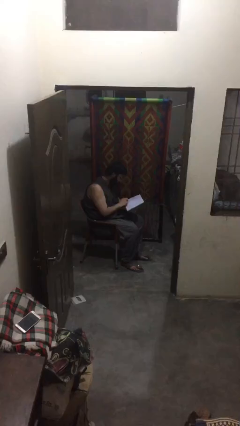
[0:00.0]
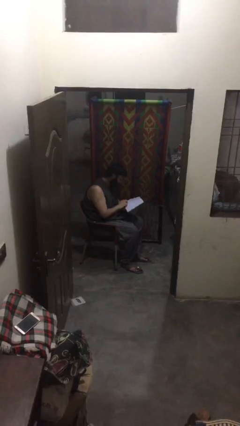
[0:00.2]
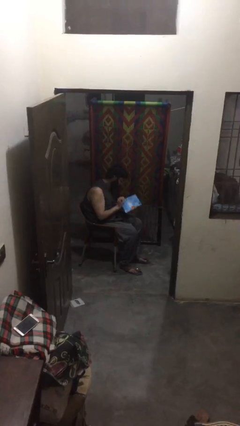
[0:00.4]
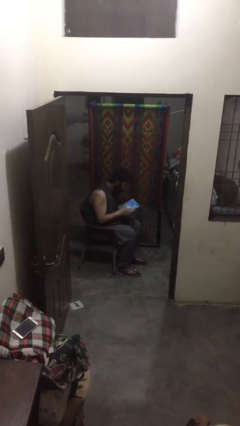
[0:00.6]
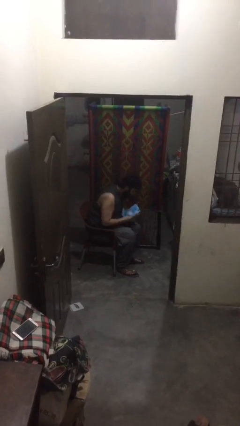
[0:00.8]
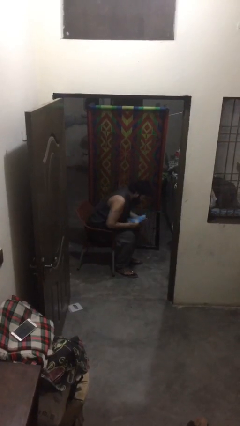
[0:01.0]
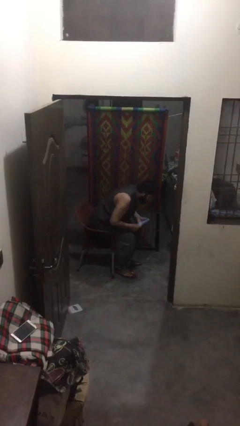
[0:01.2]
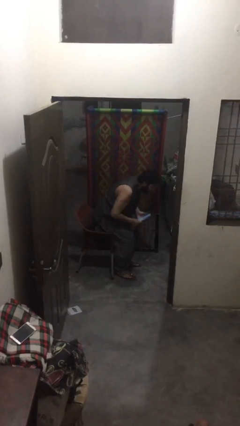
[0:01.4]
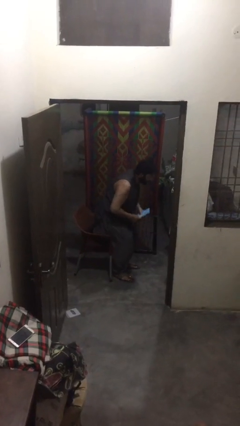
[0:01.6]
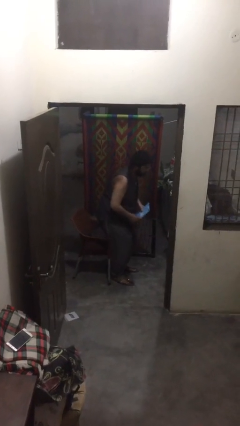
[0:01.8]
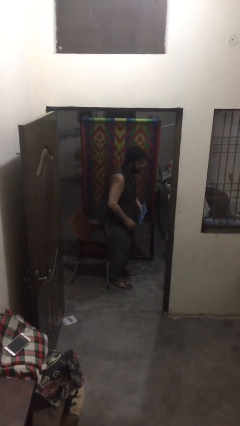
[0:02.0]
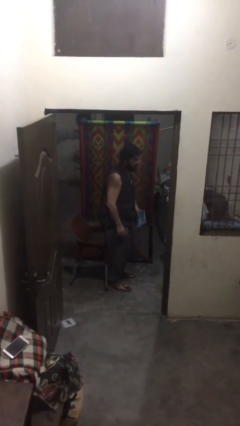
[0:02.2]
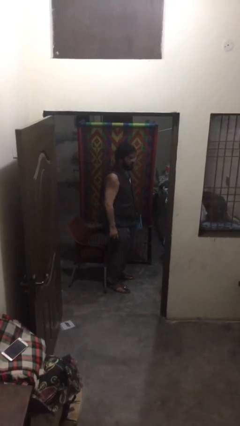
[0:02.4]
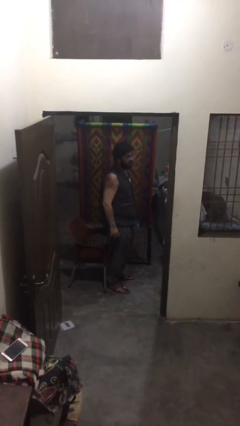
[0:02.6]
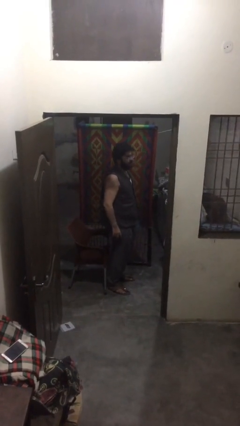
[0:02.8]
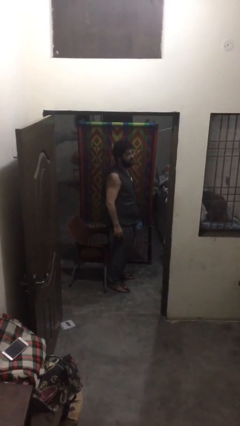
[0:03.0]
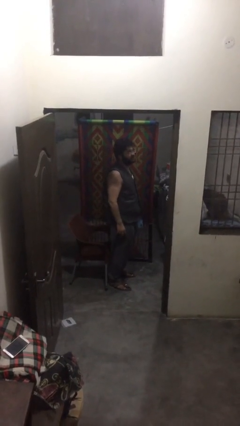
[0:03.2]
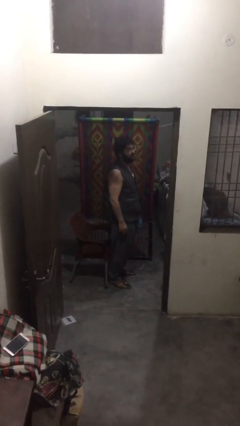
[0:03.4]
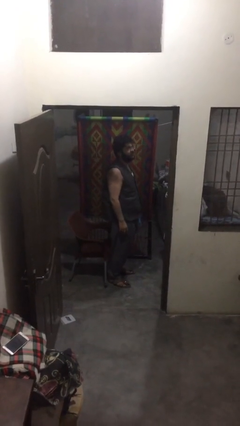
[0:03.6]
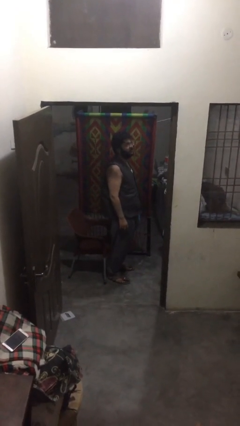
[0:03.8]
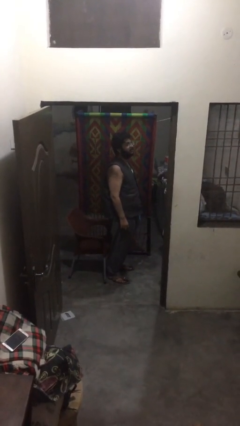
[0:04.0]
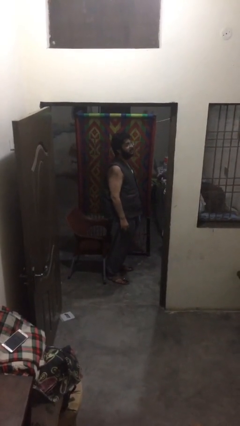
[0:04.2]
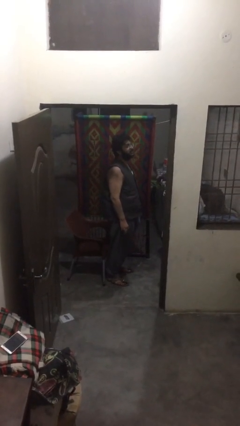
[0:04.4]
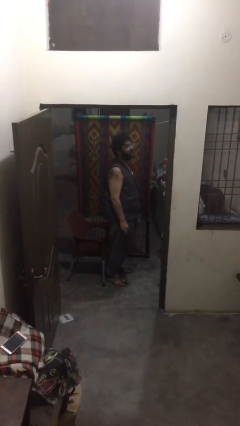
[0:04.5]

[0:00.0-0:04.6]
person stands up

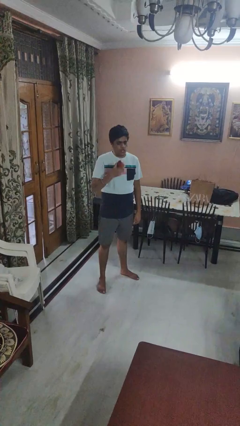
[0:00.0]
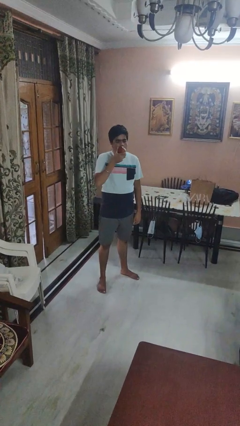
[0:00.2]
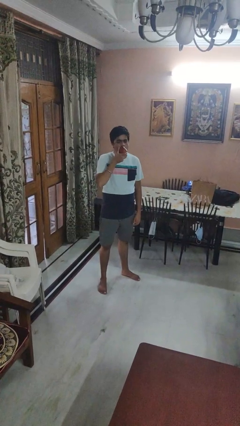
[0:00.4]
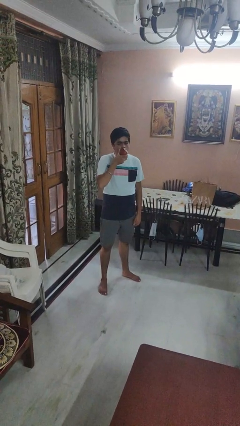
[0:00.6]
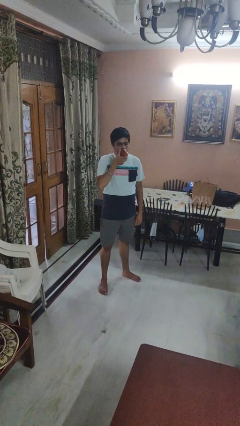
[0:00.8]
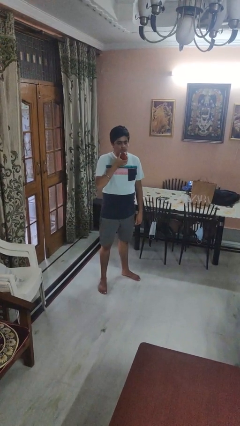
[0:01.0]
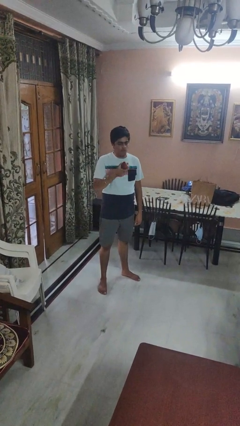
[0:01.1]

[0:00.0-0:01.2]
person eats apple

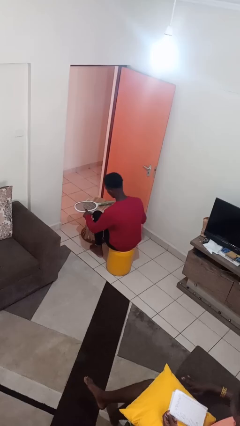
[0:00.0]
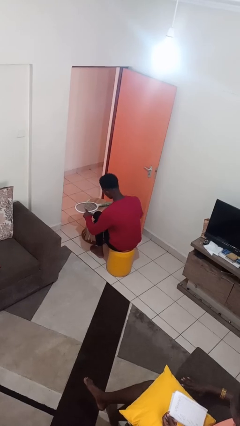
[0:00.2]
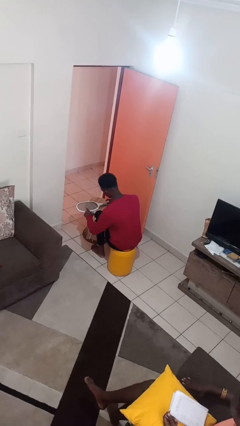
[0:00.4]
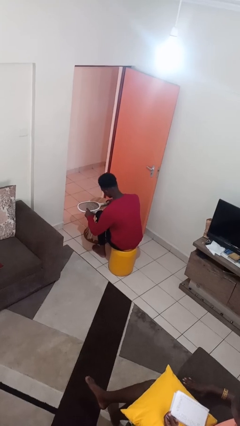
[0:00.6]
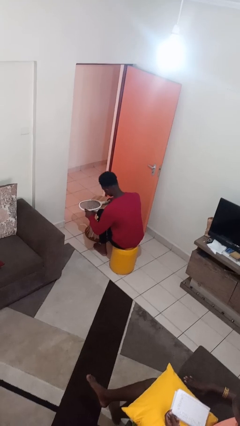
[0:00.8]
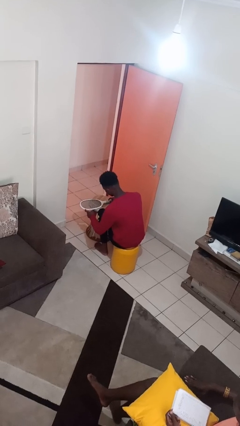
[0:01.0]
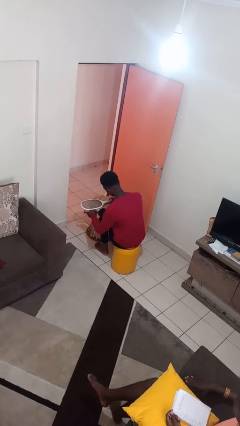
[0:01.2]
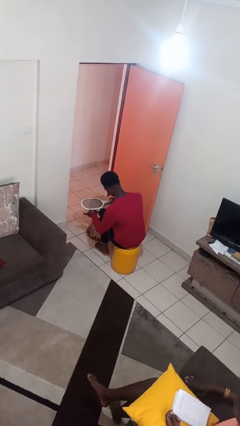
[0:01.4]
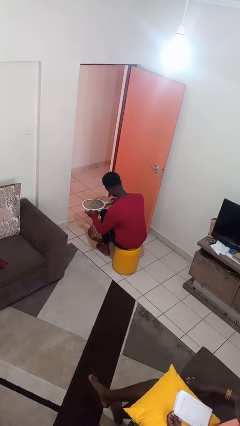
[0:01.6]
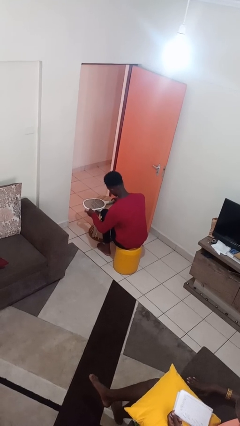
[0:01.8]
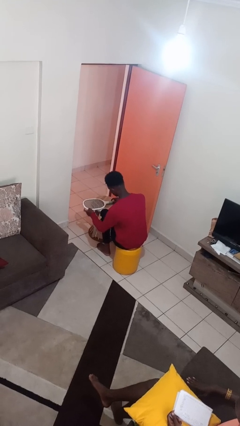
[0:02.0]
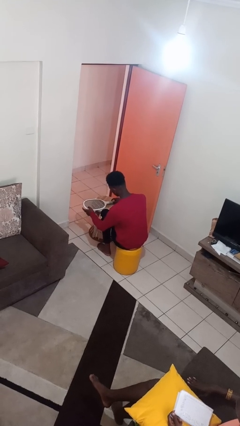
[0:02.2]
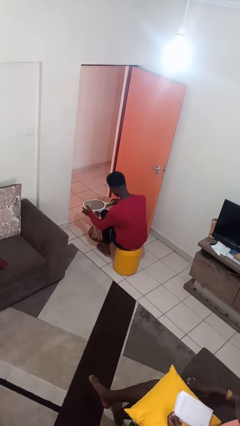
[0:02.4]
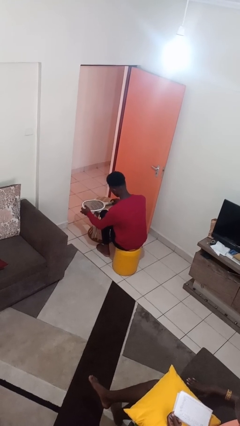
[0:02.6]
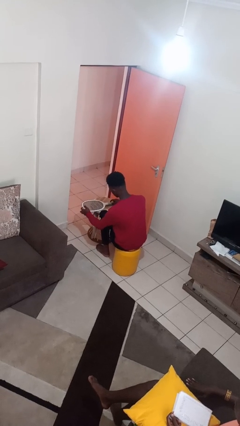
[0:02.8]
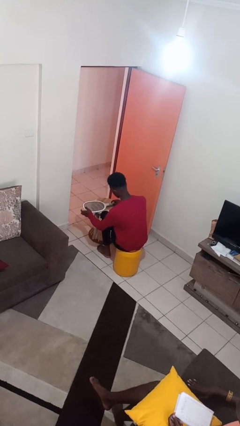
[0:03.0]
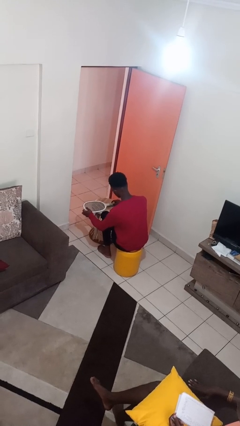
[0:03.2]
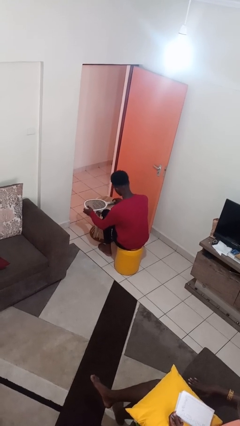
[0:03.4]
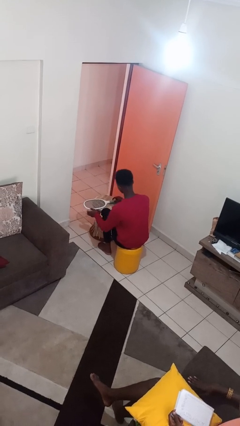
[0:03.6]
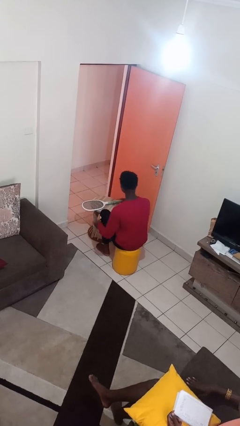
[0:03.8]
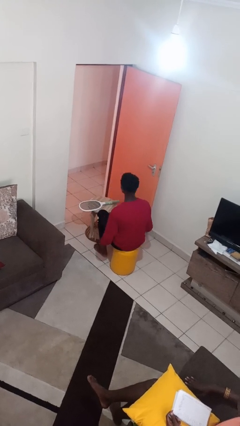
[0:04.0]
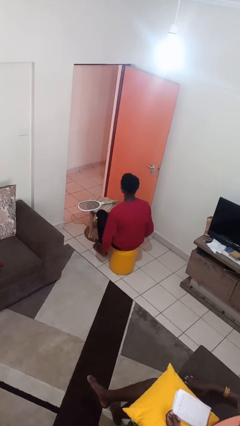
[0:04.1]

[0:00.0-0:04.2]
person taps object with finger

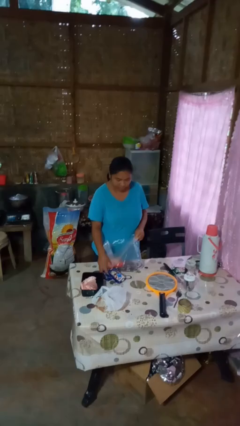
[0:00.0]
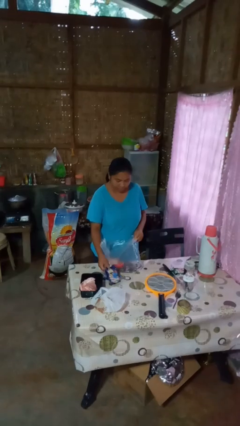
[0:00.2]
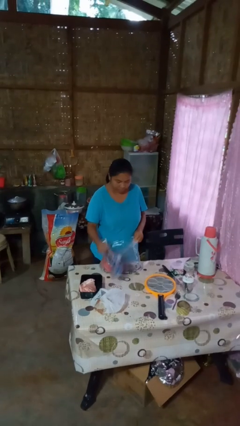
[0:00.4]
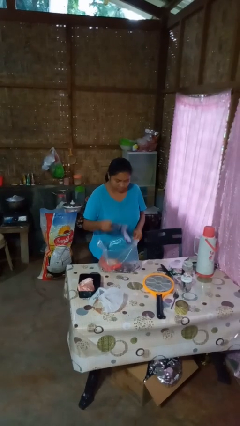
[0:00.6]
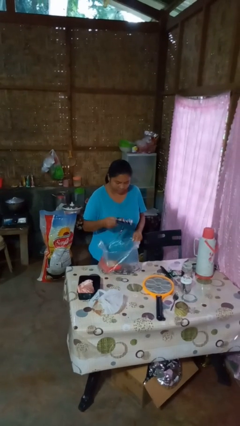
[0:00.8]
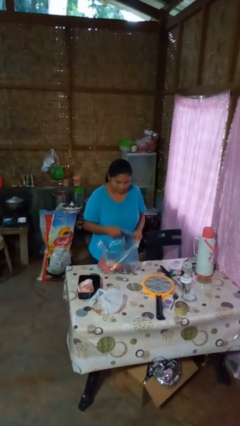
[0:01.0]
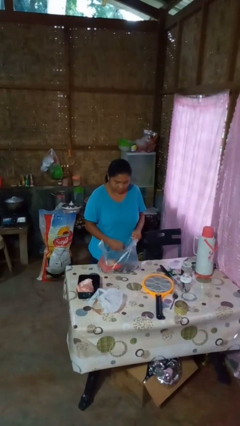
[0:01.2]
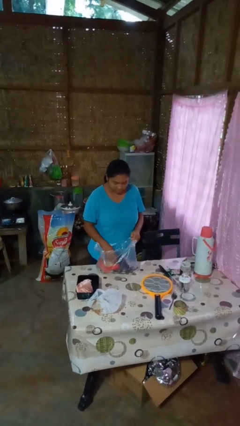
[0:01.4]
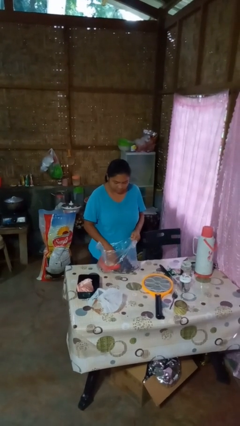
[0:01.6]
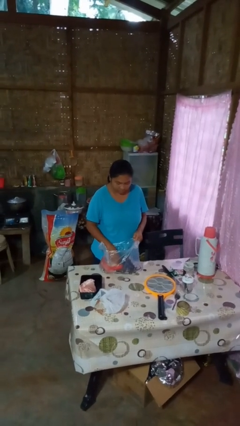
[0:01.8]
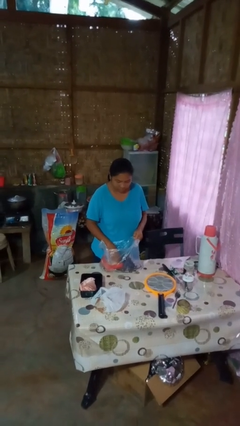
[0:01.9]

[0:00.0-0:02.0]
person puts object into bag

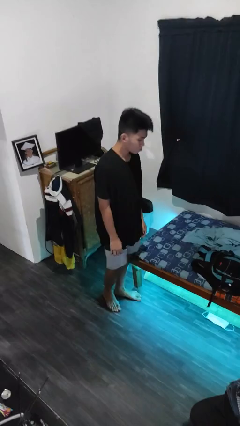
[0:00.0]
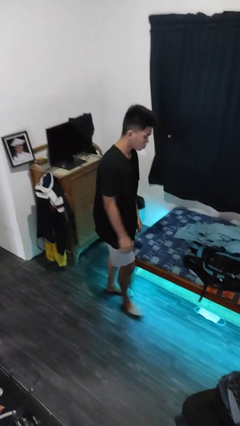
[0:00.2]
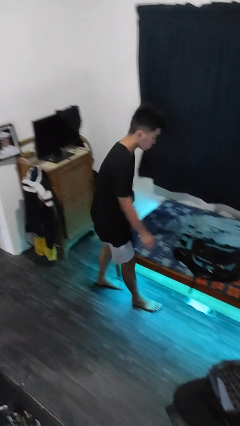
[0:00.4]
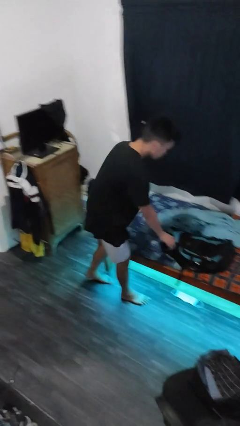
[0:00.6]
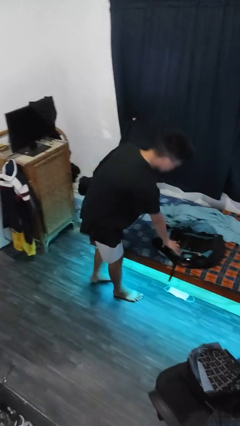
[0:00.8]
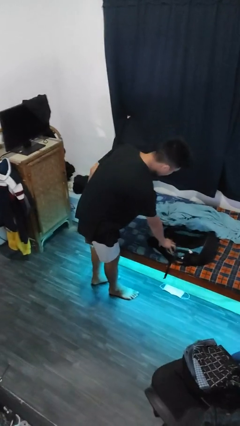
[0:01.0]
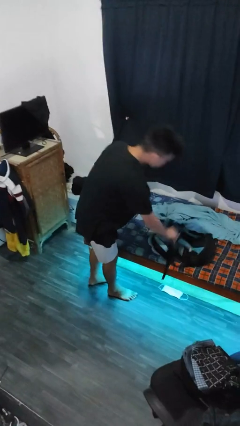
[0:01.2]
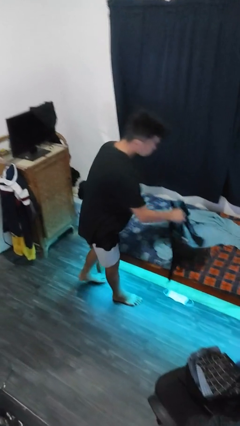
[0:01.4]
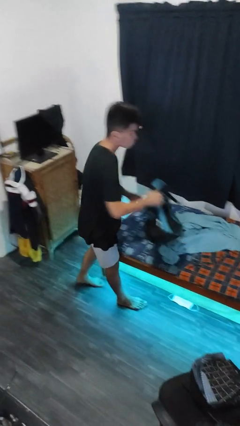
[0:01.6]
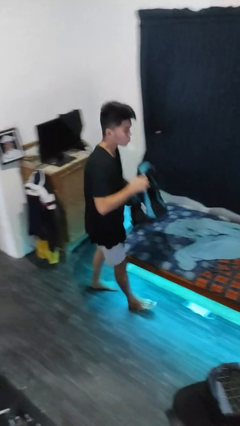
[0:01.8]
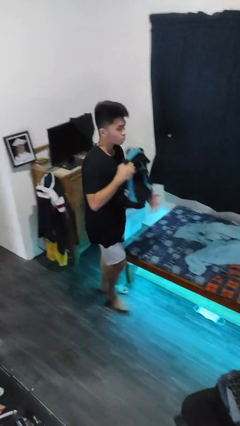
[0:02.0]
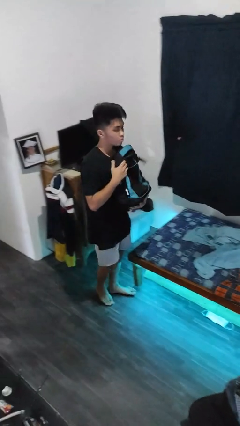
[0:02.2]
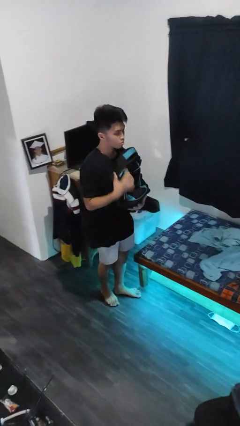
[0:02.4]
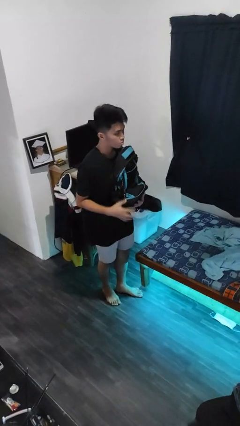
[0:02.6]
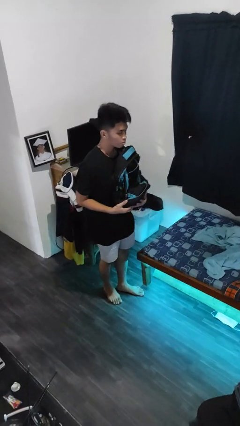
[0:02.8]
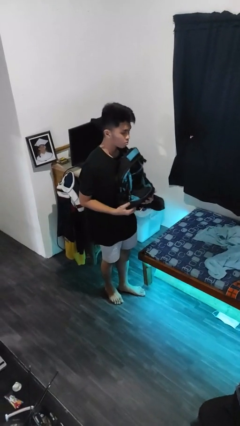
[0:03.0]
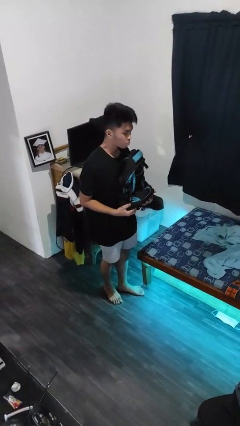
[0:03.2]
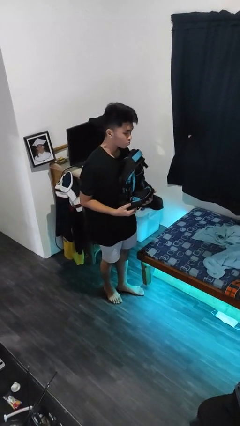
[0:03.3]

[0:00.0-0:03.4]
person picks up object from bed

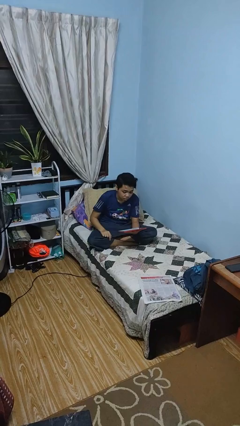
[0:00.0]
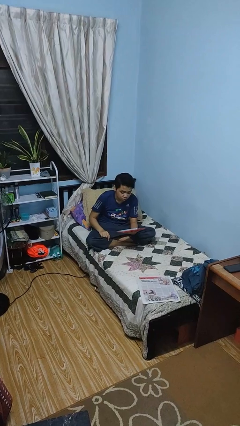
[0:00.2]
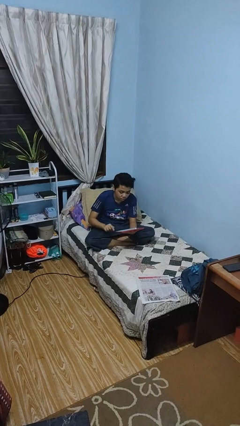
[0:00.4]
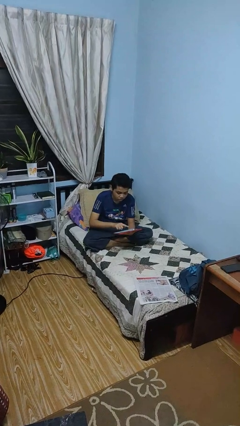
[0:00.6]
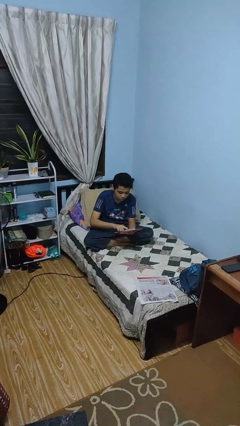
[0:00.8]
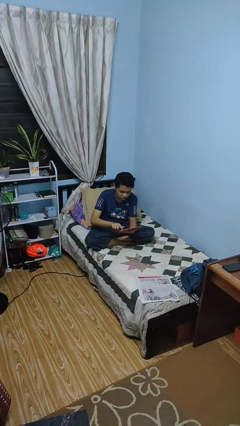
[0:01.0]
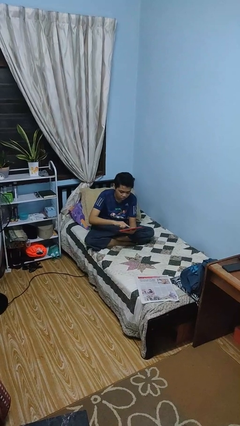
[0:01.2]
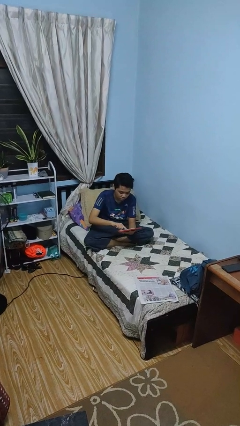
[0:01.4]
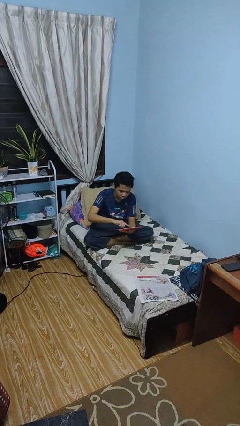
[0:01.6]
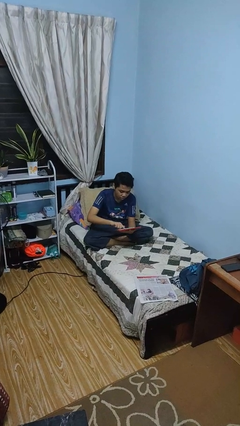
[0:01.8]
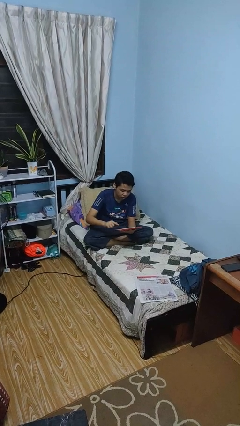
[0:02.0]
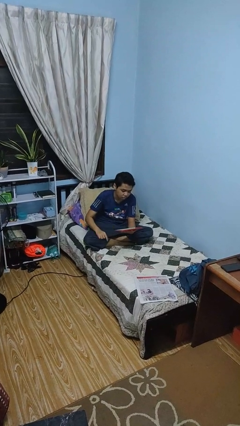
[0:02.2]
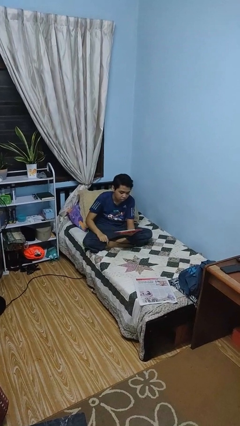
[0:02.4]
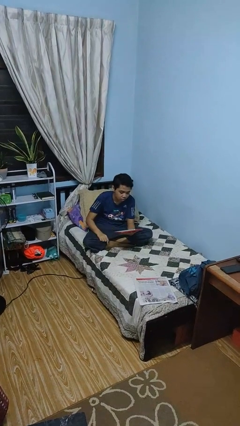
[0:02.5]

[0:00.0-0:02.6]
person interacts with tablet
